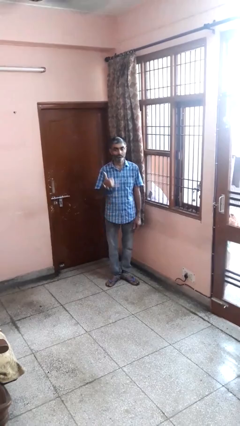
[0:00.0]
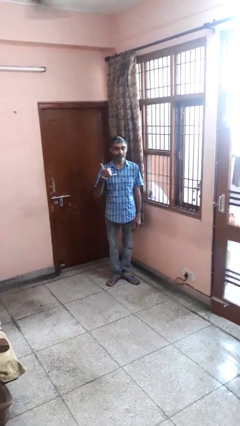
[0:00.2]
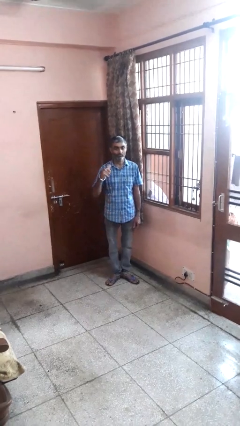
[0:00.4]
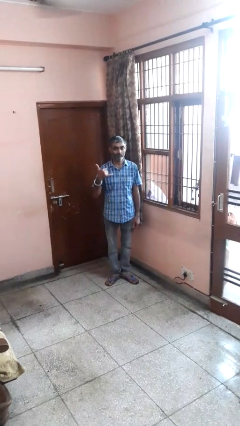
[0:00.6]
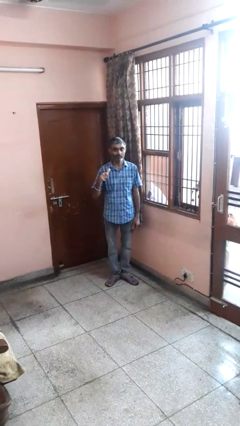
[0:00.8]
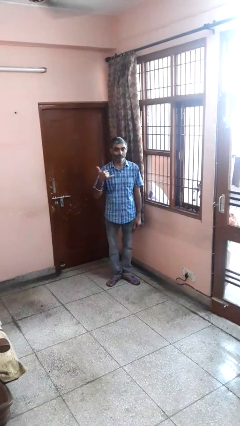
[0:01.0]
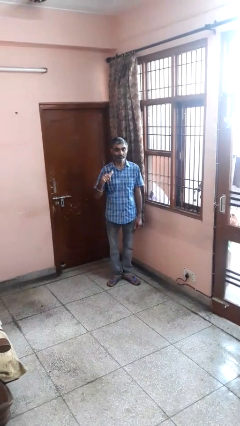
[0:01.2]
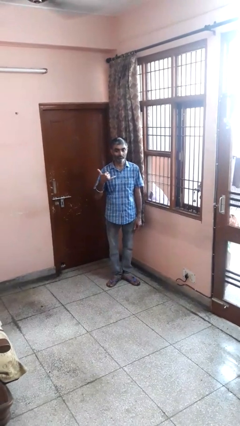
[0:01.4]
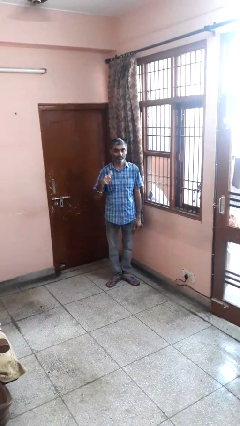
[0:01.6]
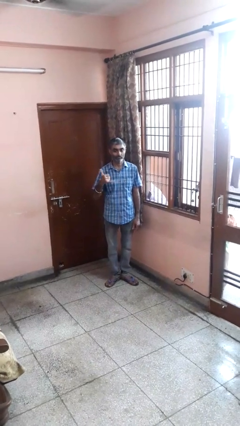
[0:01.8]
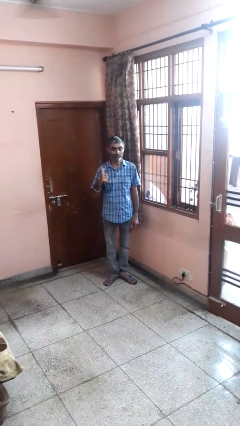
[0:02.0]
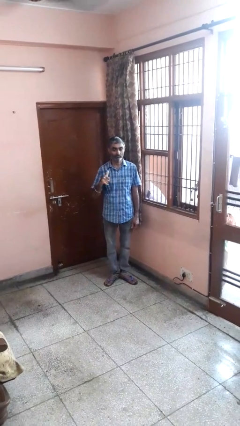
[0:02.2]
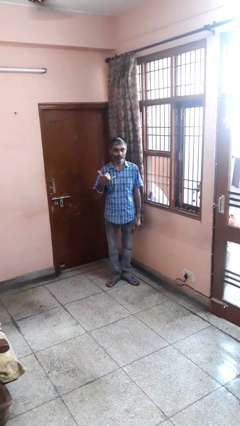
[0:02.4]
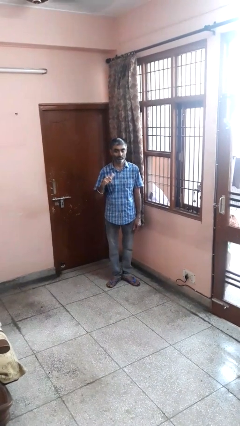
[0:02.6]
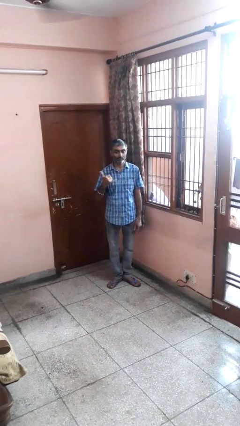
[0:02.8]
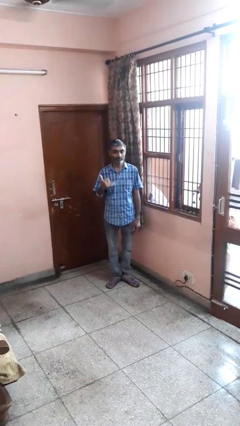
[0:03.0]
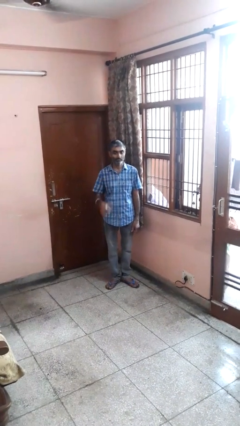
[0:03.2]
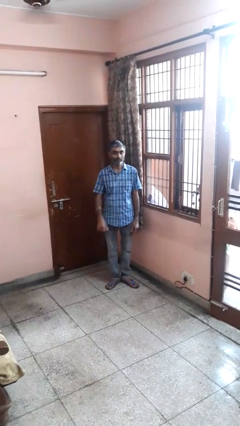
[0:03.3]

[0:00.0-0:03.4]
person gestures hang loose

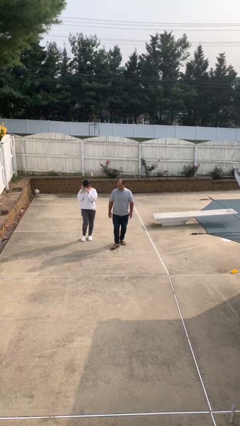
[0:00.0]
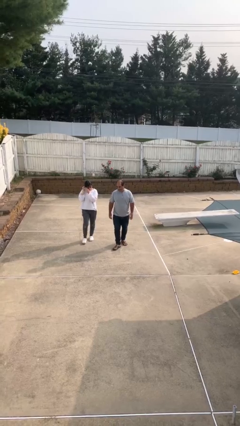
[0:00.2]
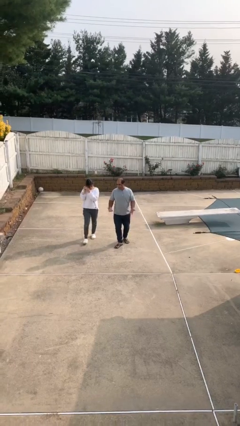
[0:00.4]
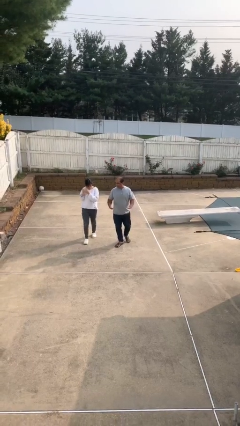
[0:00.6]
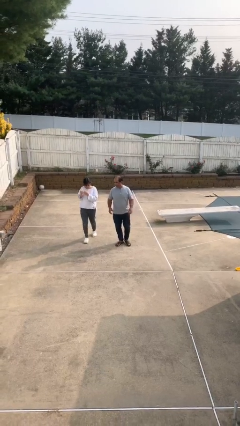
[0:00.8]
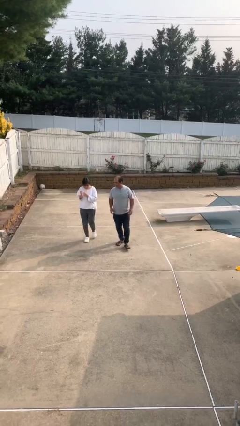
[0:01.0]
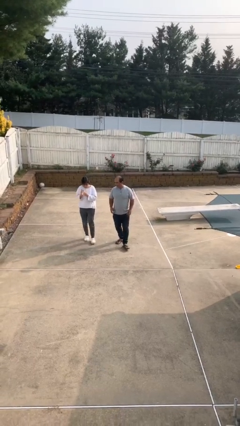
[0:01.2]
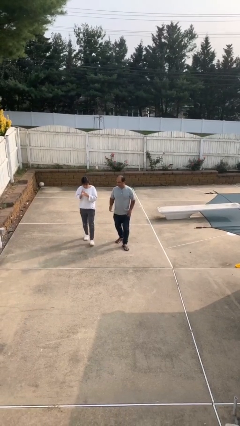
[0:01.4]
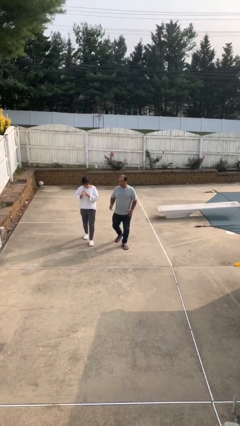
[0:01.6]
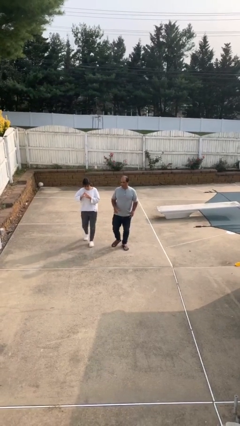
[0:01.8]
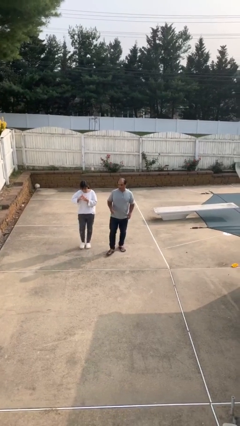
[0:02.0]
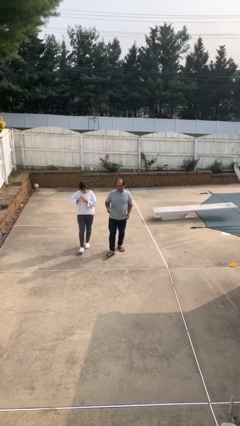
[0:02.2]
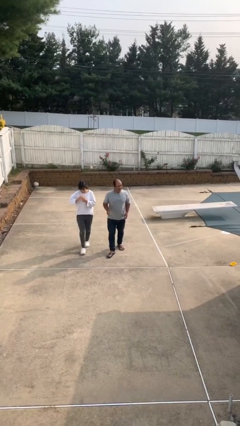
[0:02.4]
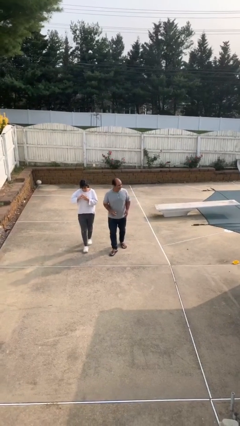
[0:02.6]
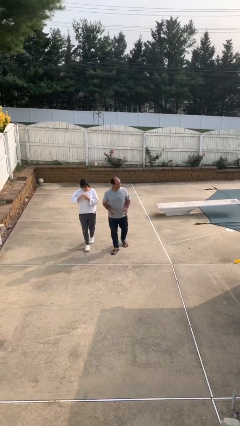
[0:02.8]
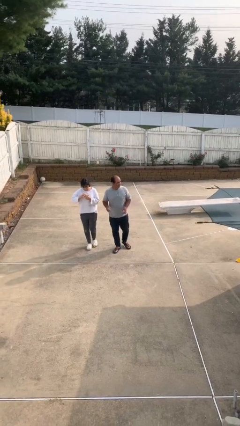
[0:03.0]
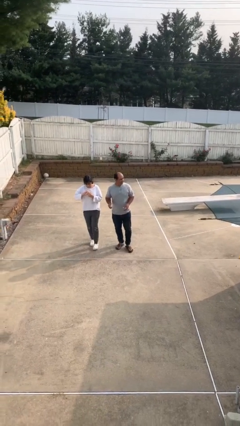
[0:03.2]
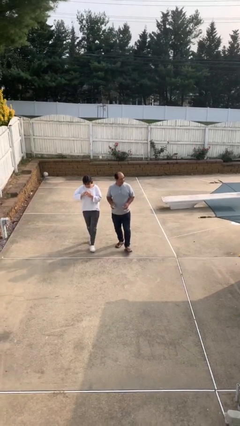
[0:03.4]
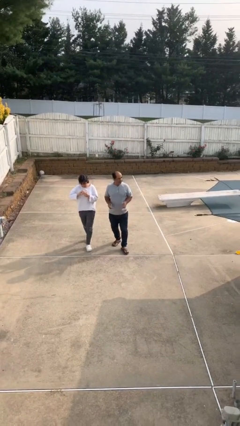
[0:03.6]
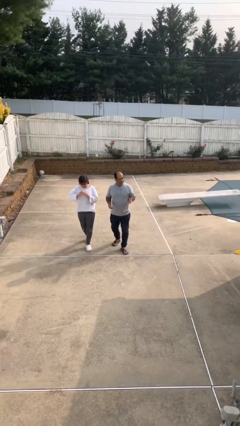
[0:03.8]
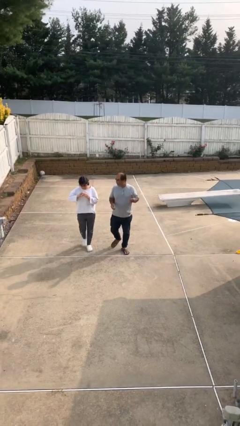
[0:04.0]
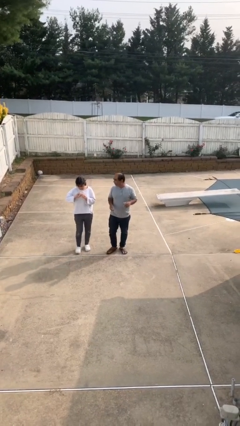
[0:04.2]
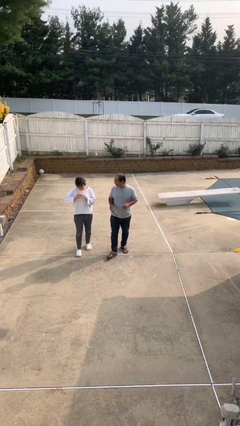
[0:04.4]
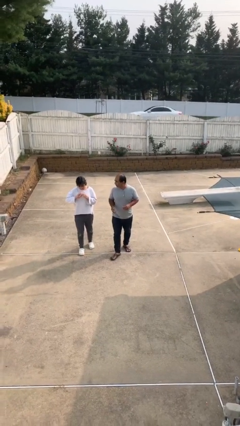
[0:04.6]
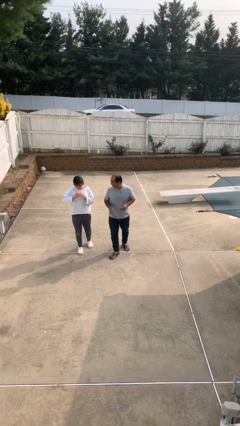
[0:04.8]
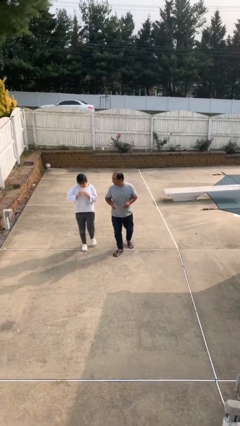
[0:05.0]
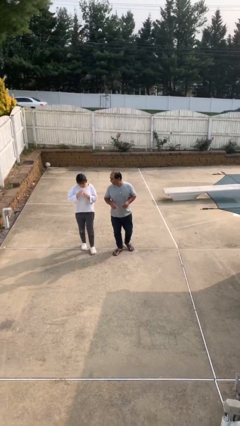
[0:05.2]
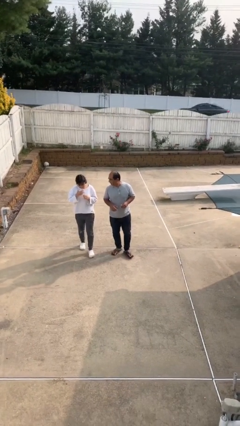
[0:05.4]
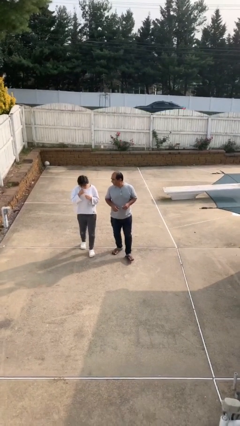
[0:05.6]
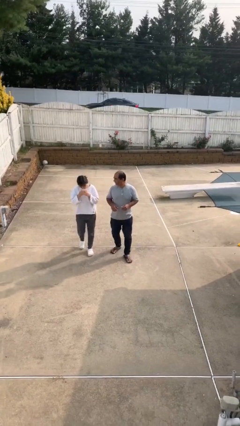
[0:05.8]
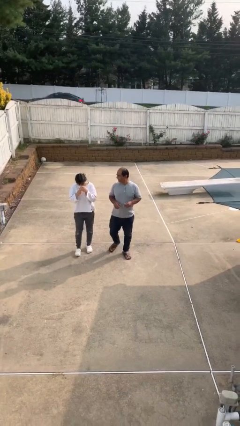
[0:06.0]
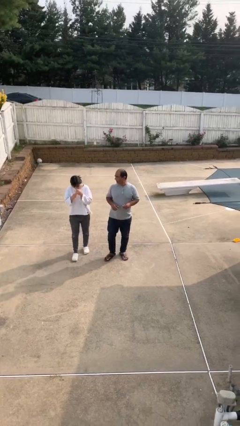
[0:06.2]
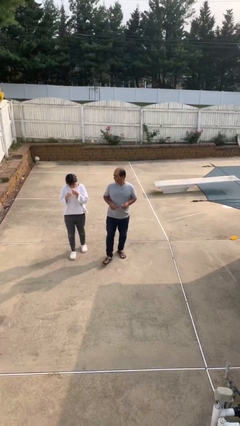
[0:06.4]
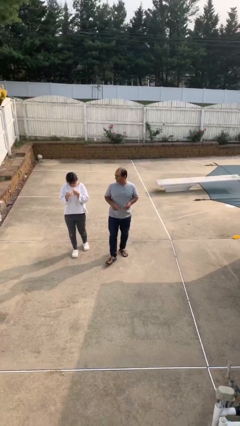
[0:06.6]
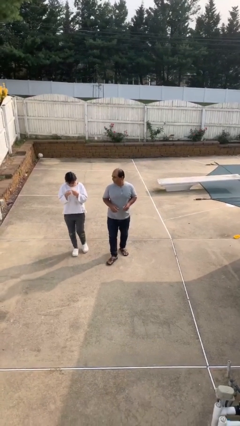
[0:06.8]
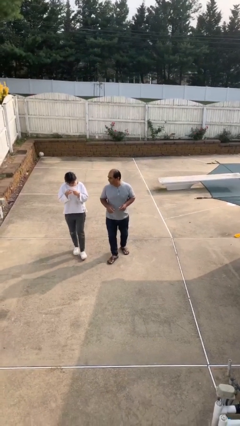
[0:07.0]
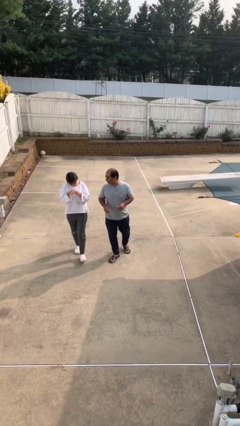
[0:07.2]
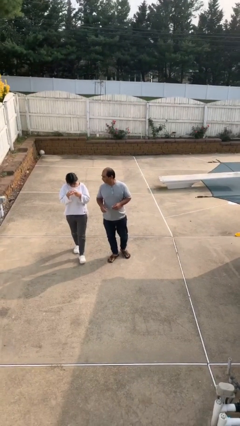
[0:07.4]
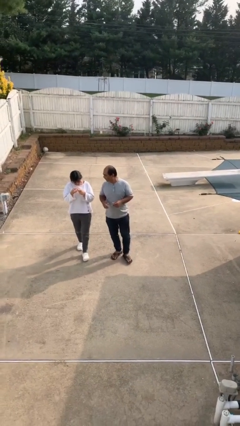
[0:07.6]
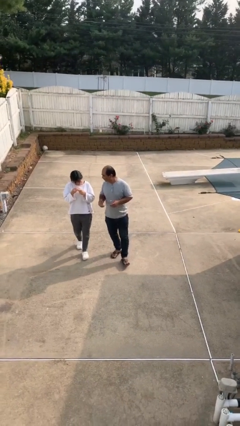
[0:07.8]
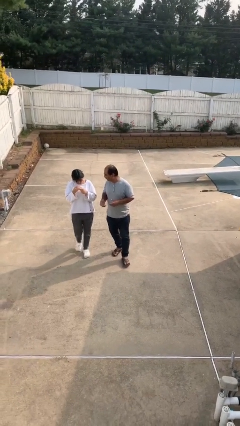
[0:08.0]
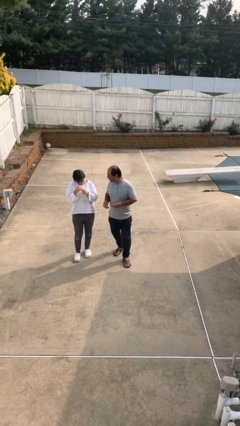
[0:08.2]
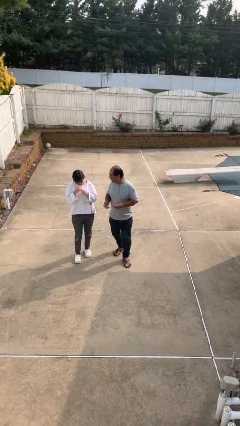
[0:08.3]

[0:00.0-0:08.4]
person talks to person

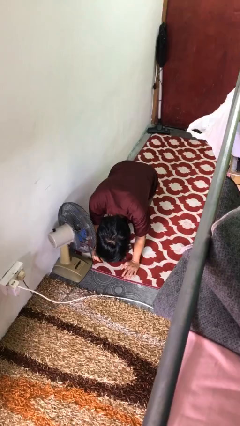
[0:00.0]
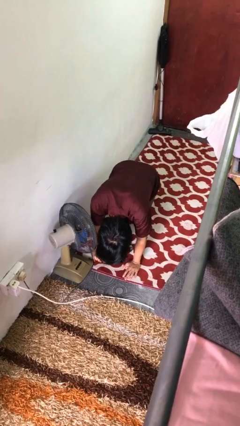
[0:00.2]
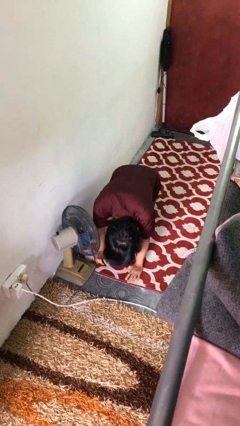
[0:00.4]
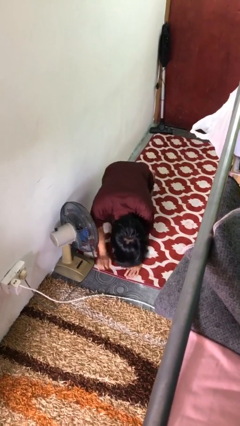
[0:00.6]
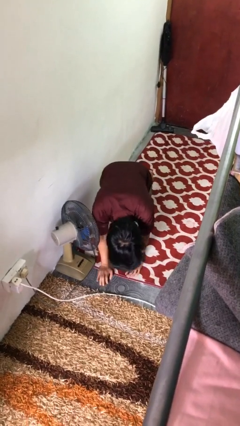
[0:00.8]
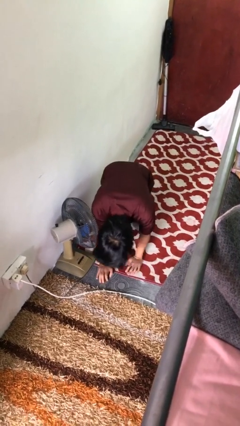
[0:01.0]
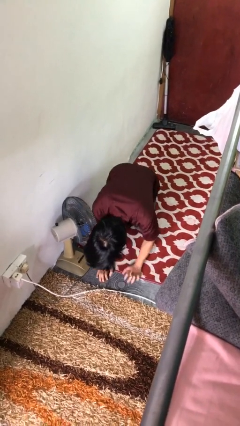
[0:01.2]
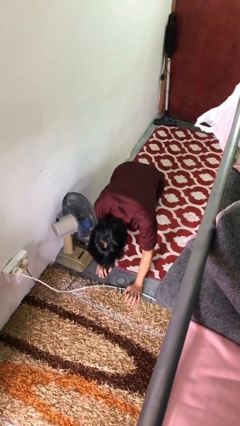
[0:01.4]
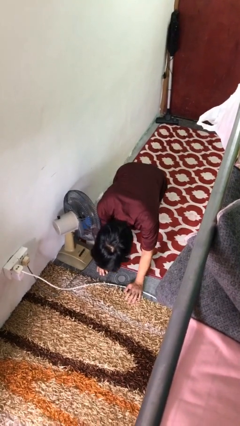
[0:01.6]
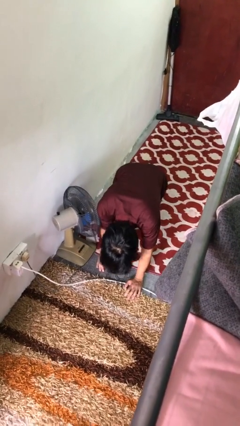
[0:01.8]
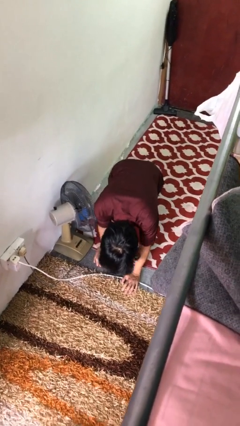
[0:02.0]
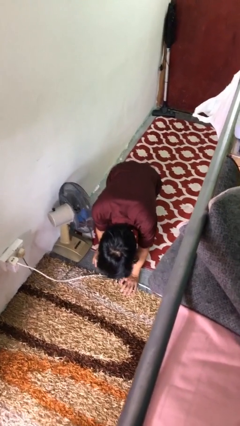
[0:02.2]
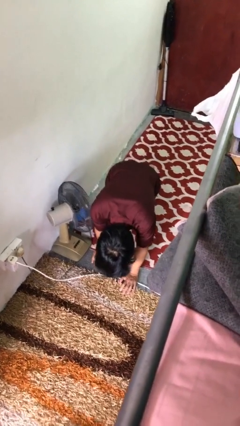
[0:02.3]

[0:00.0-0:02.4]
person crawls

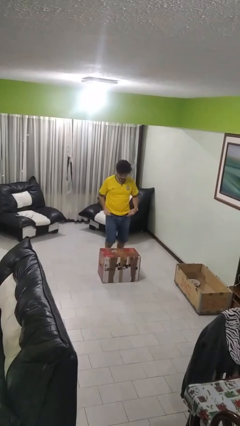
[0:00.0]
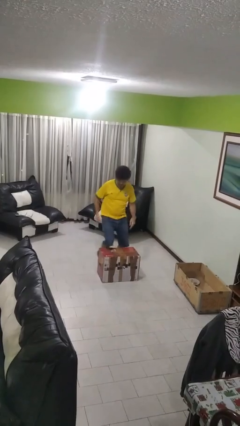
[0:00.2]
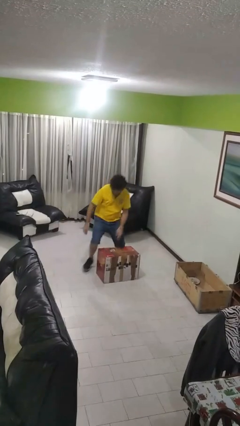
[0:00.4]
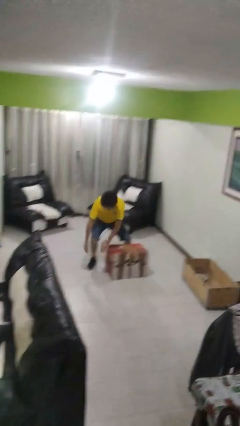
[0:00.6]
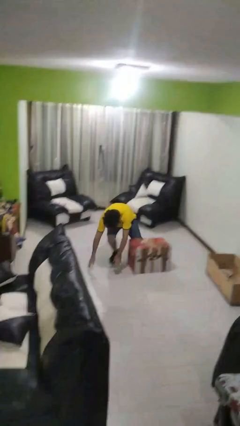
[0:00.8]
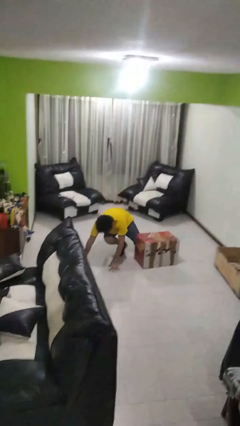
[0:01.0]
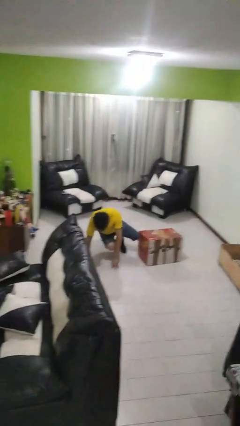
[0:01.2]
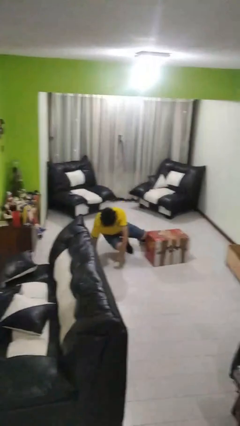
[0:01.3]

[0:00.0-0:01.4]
person trips on object on floor

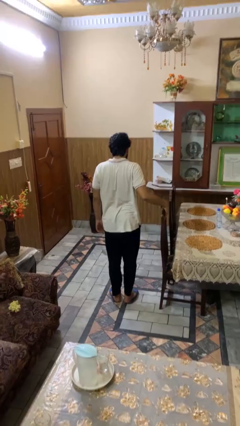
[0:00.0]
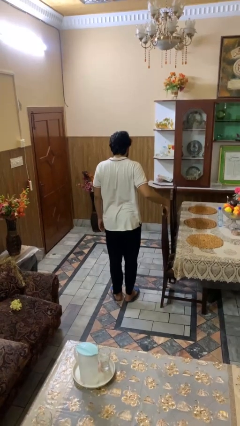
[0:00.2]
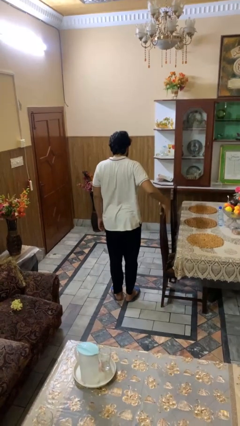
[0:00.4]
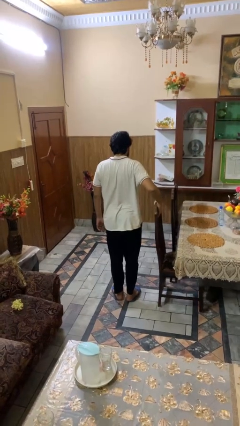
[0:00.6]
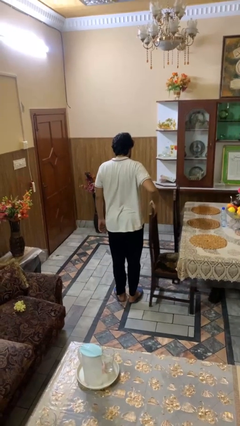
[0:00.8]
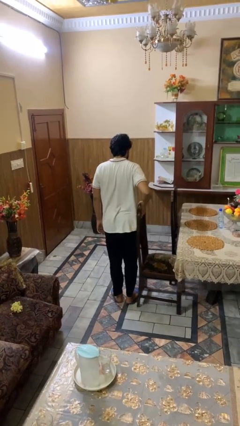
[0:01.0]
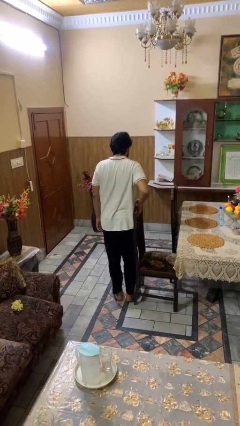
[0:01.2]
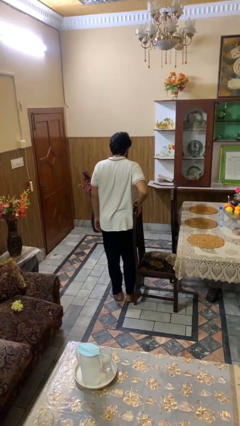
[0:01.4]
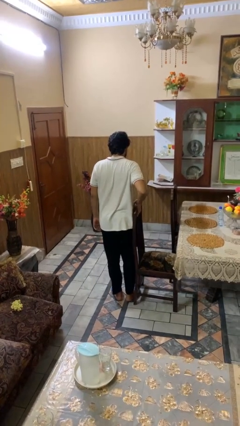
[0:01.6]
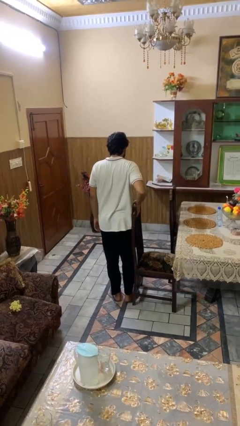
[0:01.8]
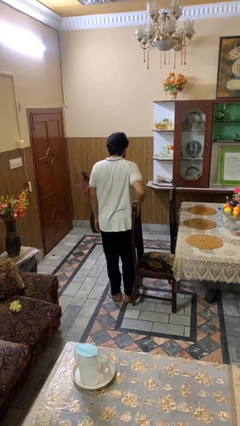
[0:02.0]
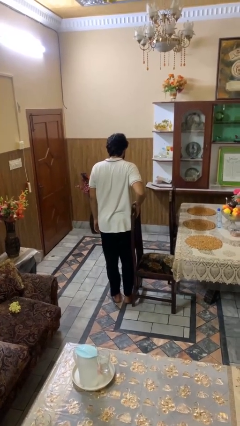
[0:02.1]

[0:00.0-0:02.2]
person pulls out chair
